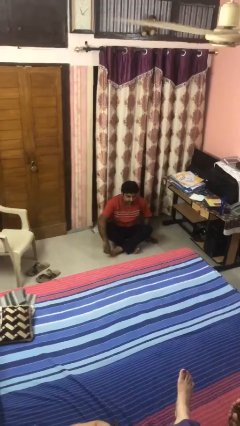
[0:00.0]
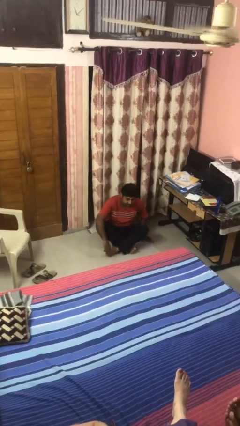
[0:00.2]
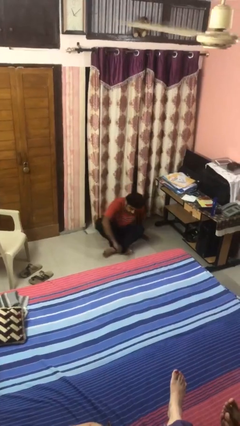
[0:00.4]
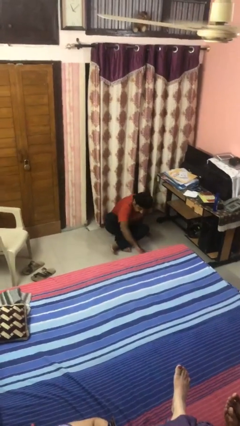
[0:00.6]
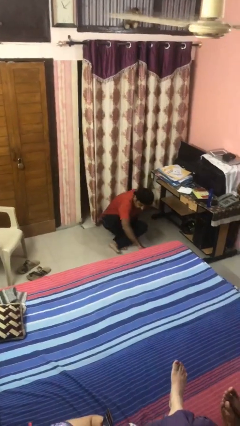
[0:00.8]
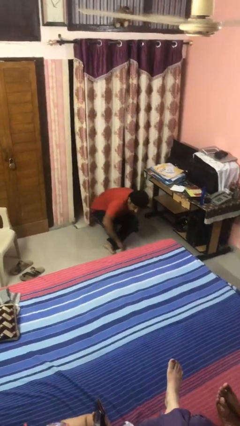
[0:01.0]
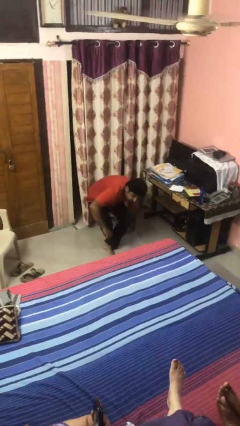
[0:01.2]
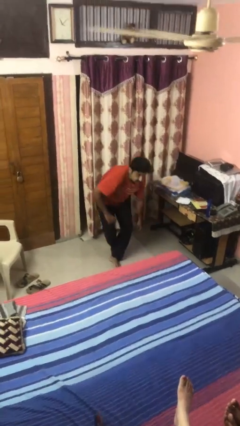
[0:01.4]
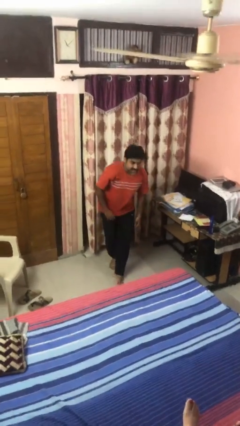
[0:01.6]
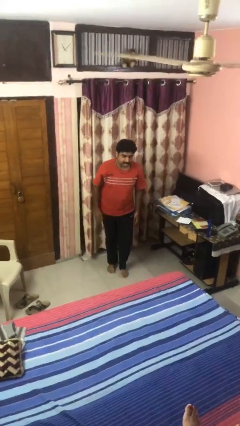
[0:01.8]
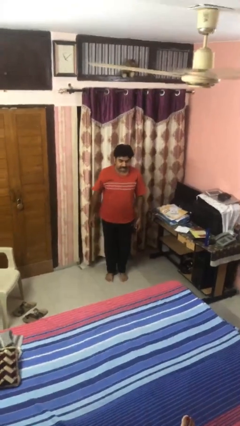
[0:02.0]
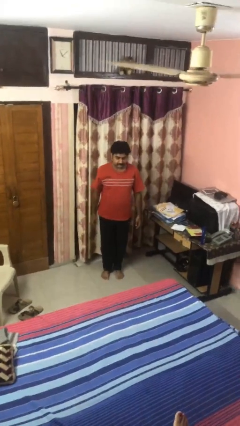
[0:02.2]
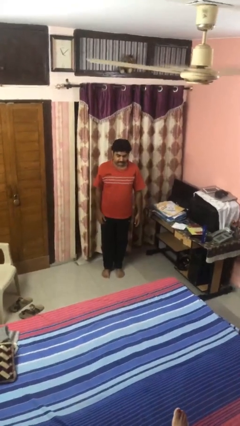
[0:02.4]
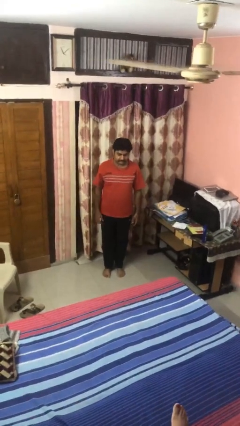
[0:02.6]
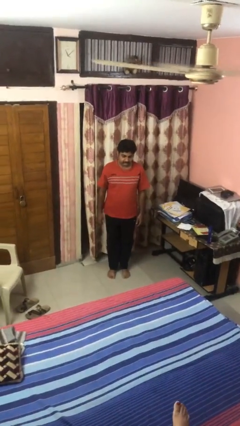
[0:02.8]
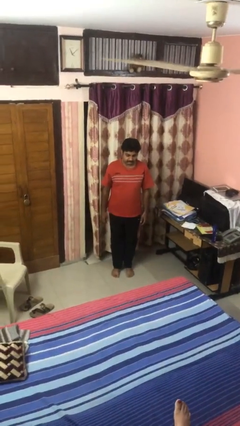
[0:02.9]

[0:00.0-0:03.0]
person stands up from floor

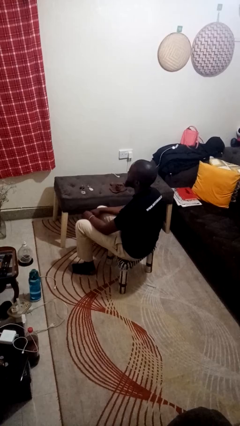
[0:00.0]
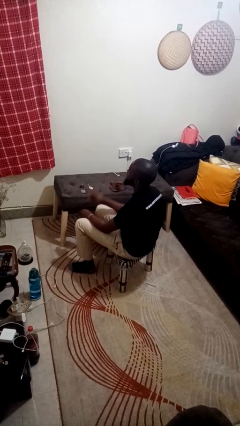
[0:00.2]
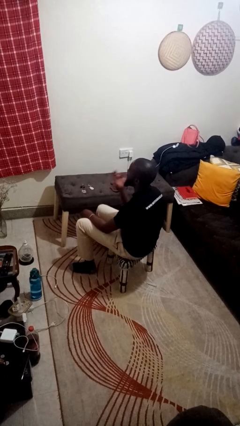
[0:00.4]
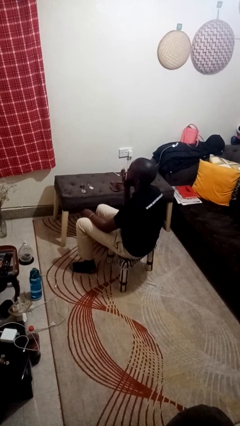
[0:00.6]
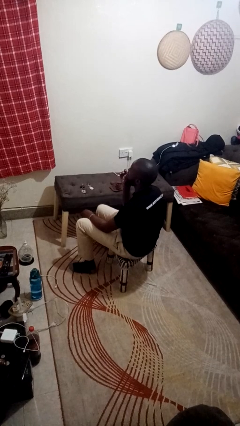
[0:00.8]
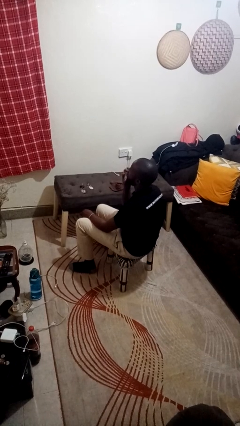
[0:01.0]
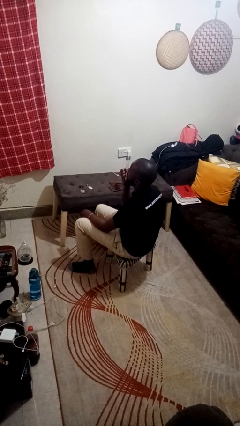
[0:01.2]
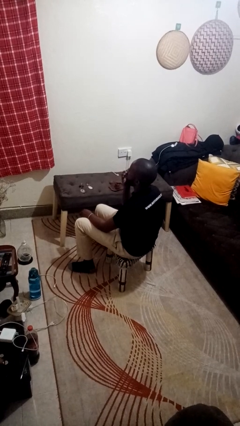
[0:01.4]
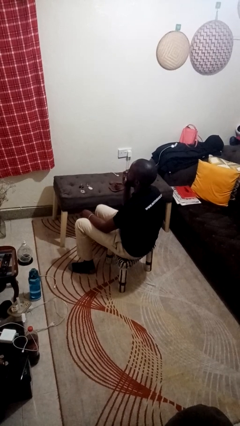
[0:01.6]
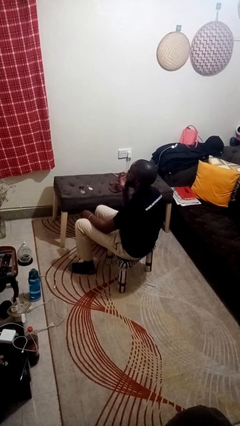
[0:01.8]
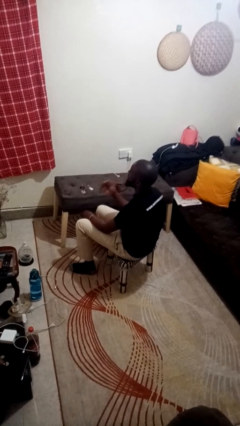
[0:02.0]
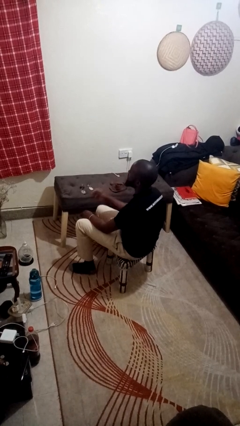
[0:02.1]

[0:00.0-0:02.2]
person licks fingers

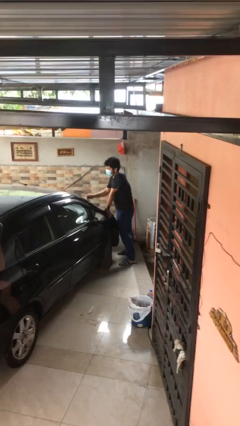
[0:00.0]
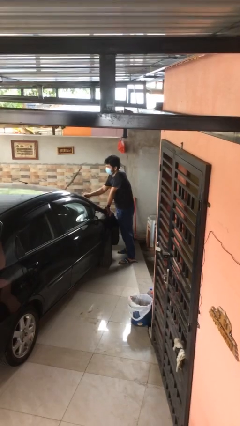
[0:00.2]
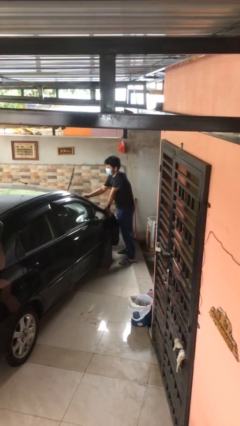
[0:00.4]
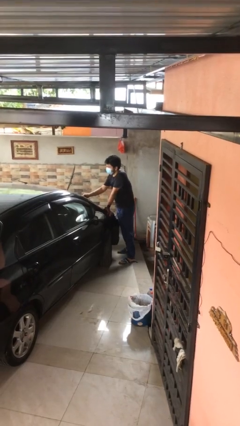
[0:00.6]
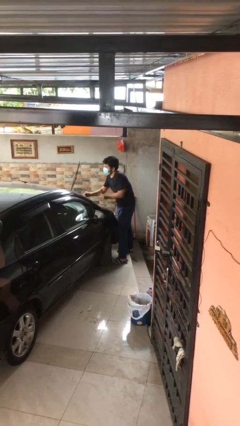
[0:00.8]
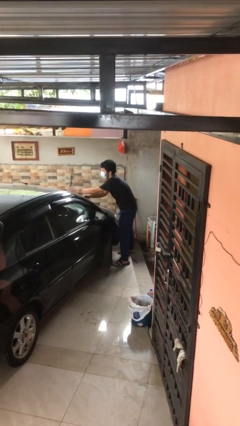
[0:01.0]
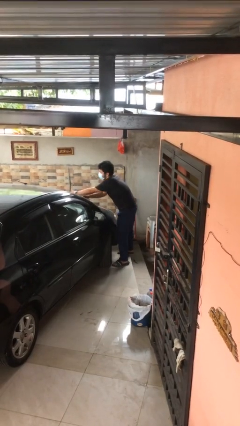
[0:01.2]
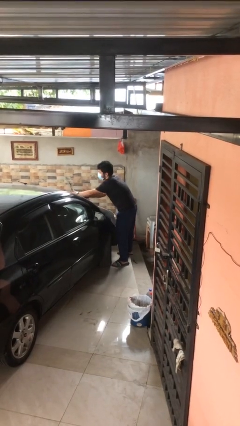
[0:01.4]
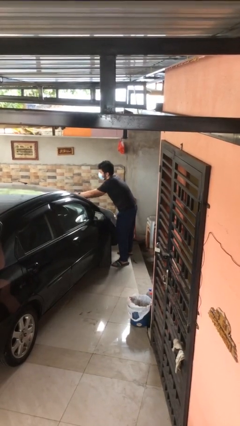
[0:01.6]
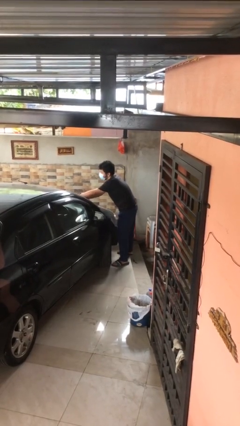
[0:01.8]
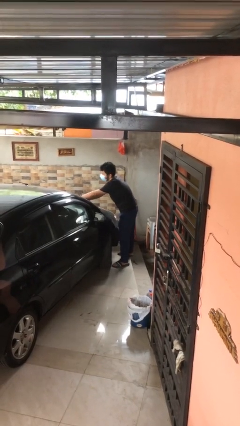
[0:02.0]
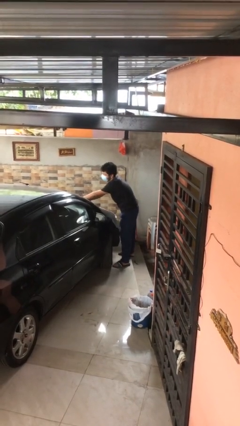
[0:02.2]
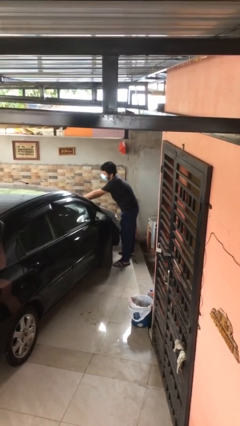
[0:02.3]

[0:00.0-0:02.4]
person flips down car wipers

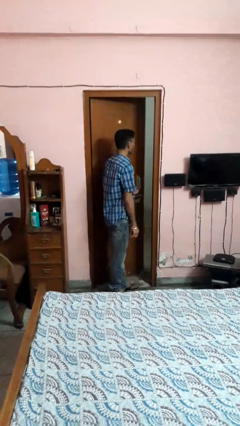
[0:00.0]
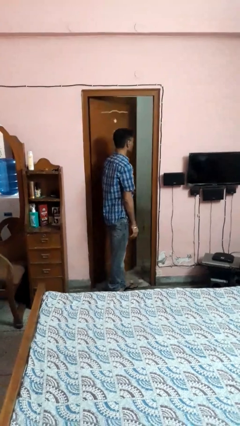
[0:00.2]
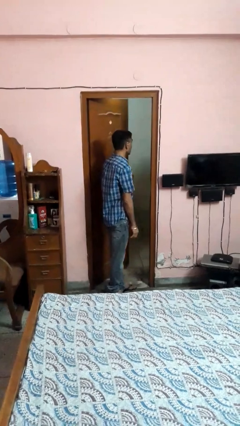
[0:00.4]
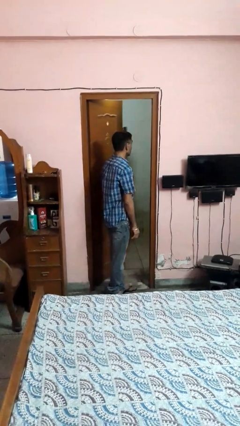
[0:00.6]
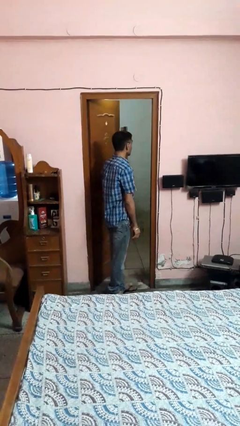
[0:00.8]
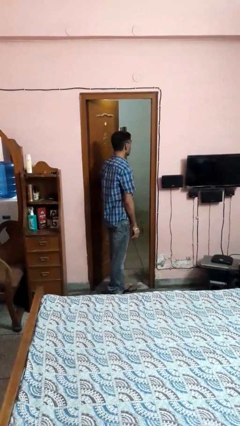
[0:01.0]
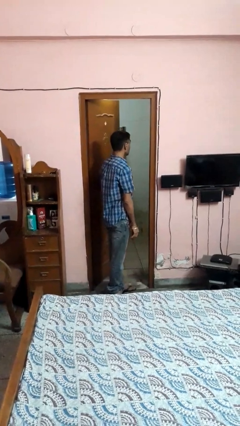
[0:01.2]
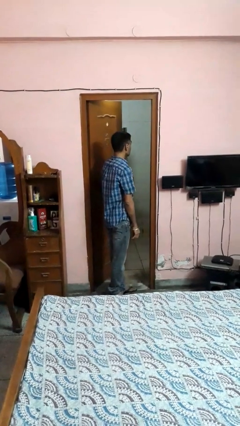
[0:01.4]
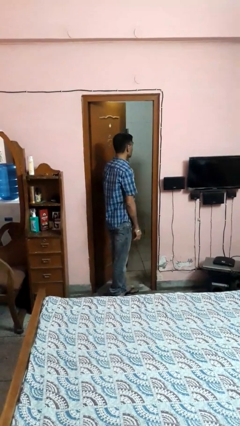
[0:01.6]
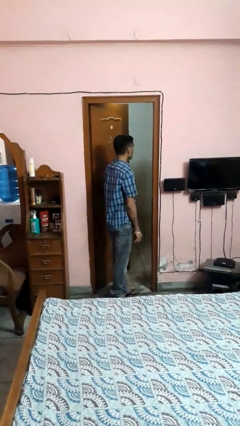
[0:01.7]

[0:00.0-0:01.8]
person opens facility door

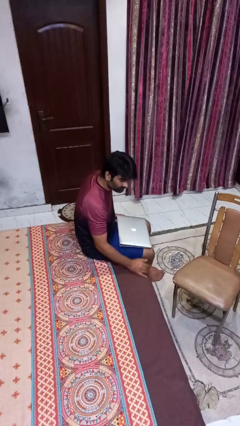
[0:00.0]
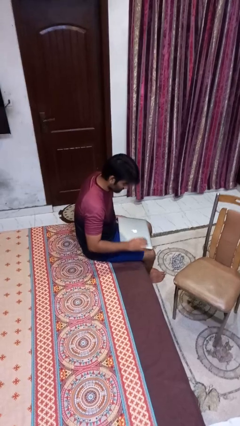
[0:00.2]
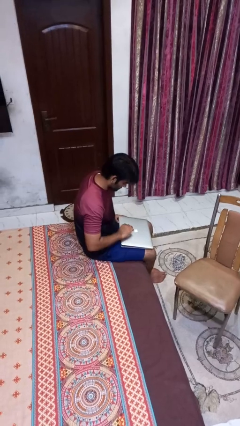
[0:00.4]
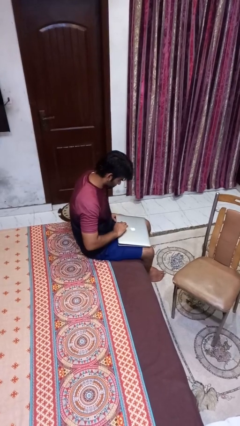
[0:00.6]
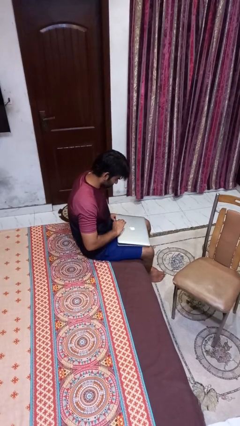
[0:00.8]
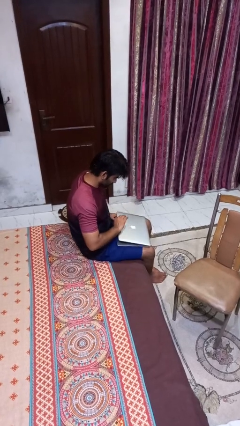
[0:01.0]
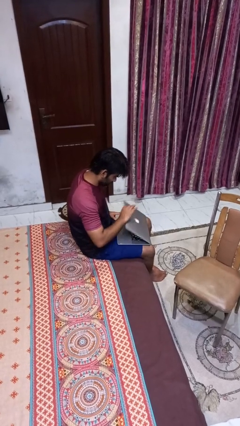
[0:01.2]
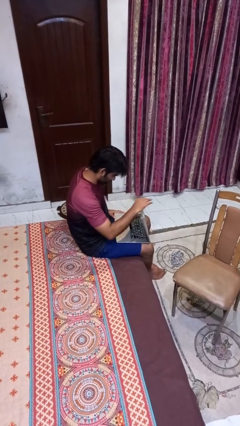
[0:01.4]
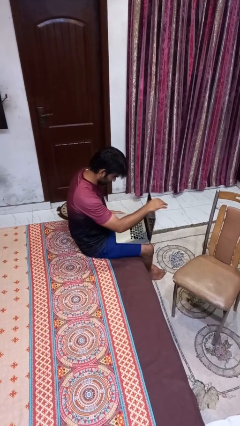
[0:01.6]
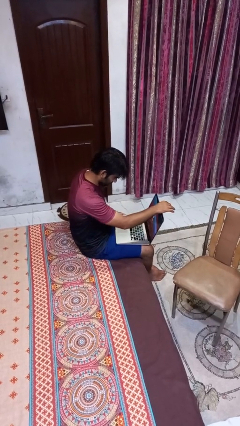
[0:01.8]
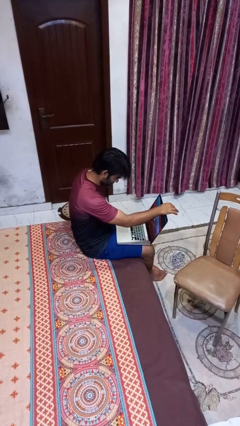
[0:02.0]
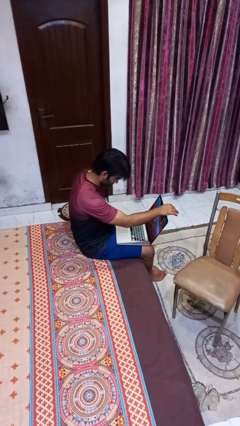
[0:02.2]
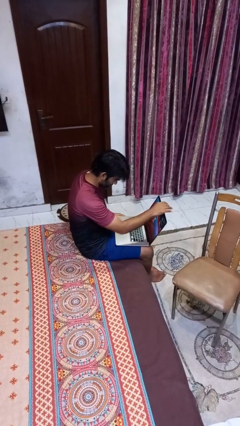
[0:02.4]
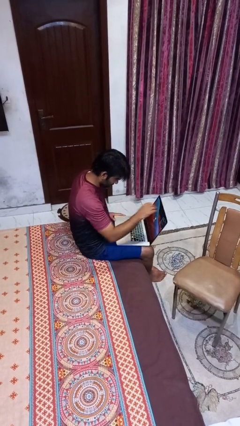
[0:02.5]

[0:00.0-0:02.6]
person opens laptop

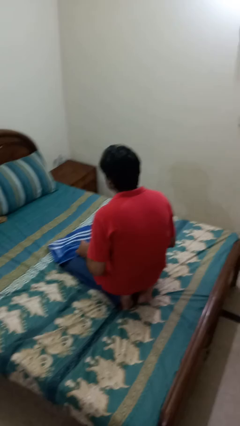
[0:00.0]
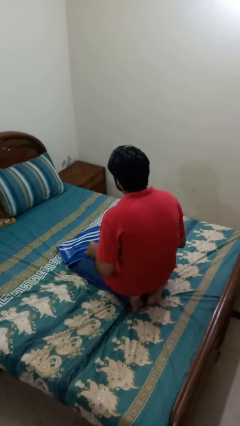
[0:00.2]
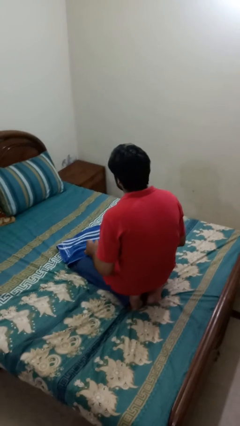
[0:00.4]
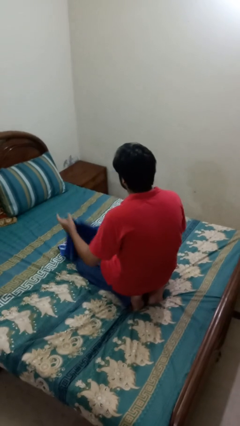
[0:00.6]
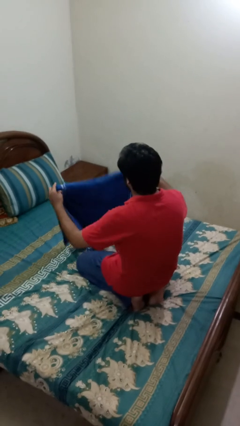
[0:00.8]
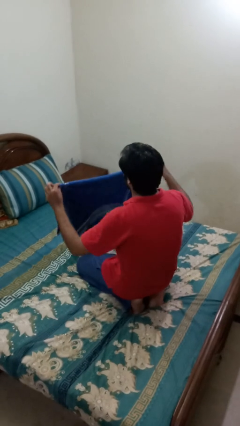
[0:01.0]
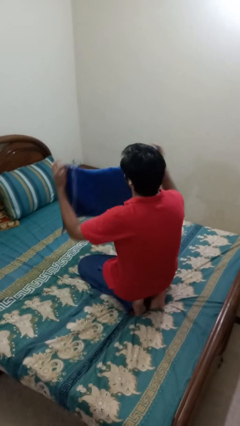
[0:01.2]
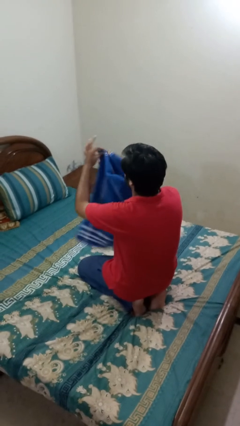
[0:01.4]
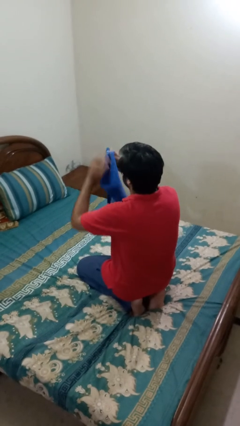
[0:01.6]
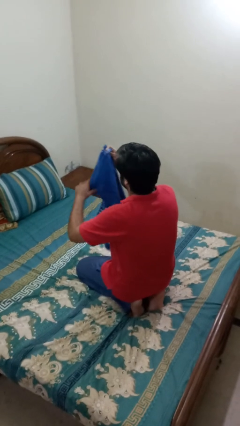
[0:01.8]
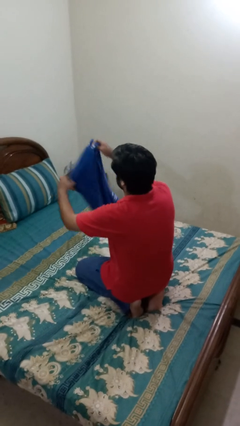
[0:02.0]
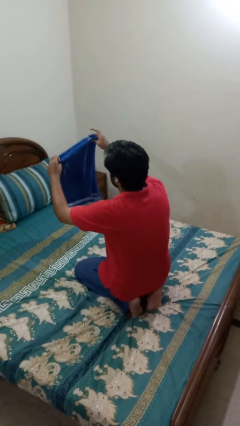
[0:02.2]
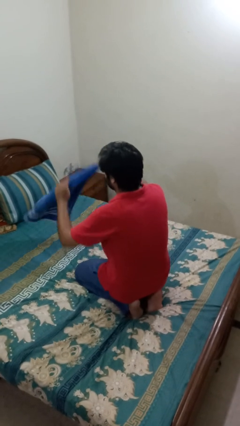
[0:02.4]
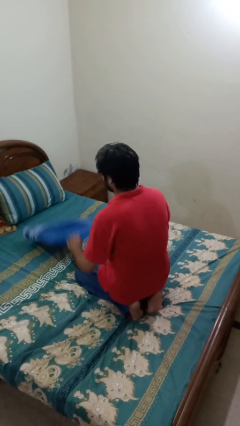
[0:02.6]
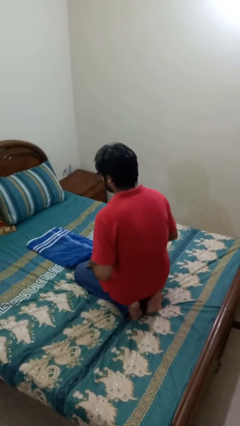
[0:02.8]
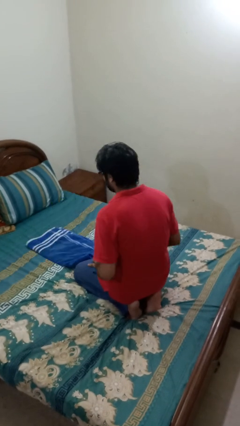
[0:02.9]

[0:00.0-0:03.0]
person folds towel

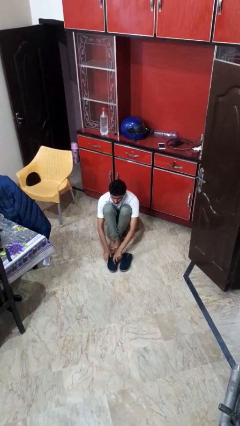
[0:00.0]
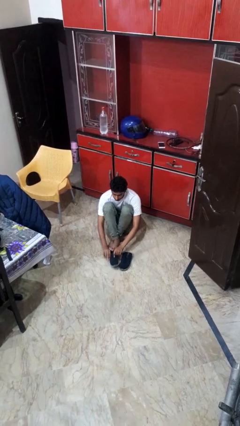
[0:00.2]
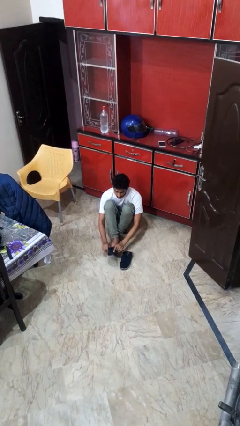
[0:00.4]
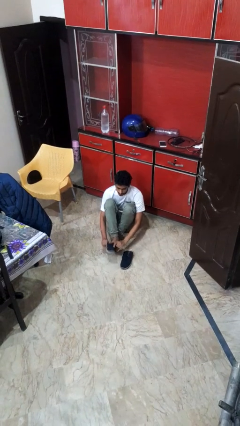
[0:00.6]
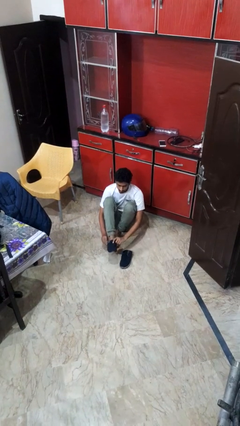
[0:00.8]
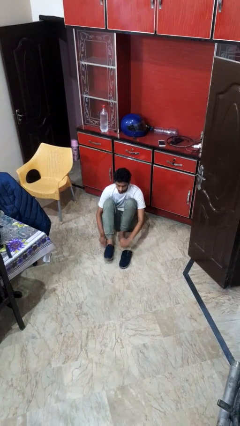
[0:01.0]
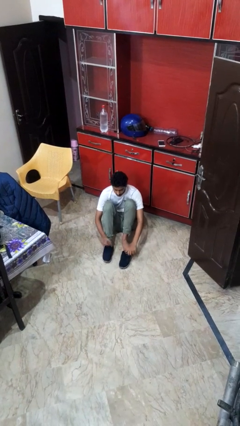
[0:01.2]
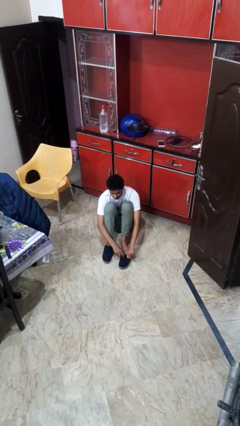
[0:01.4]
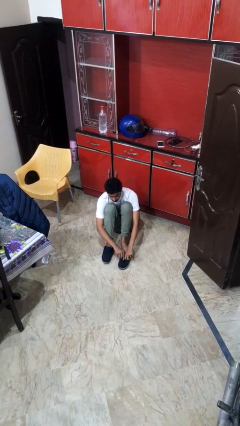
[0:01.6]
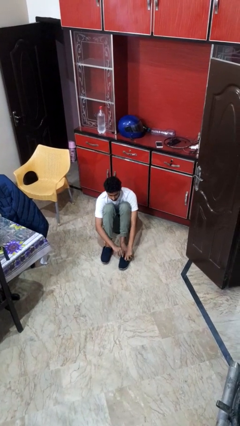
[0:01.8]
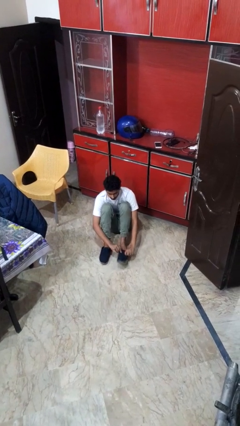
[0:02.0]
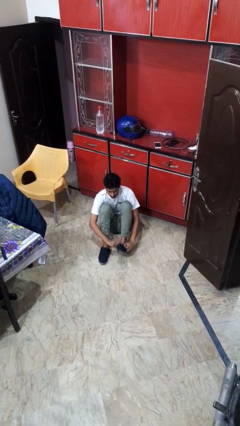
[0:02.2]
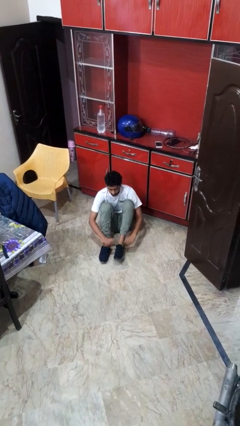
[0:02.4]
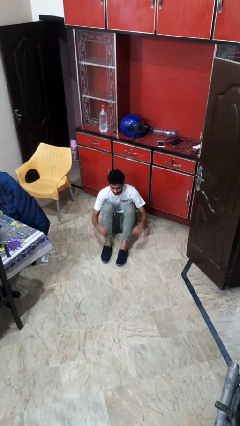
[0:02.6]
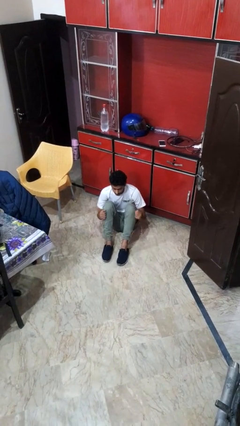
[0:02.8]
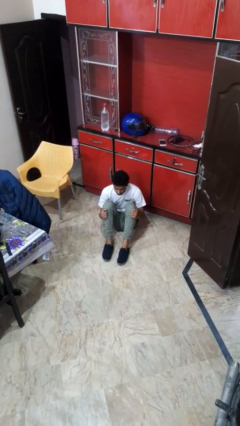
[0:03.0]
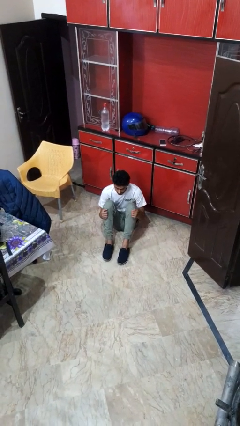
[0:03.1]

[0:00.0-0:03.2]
person puts on shoes
